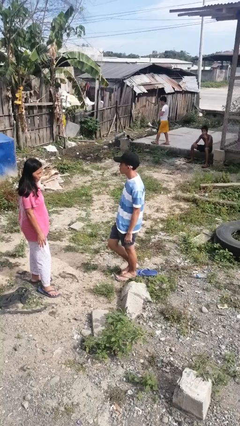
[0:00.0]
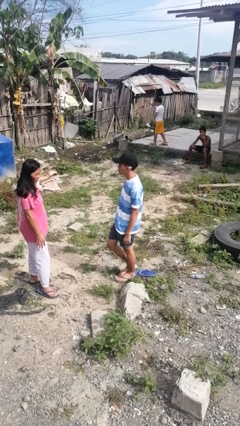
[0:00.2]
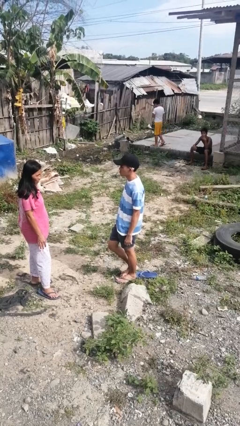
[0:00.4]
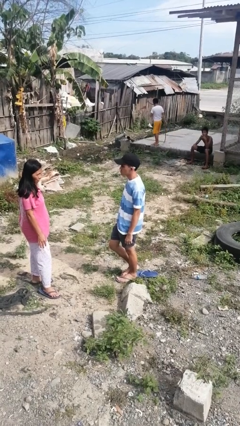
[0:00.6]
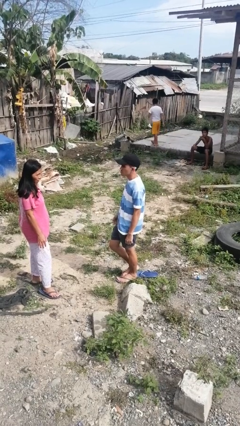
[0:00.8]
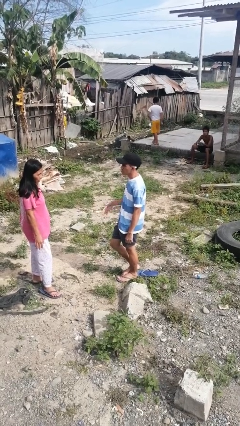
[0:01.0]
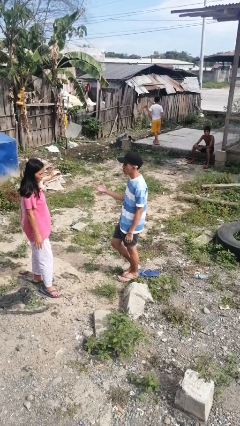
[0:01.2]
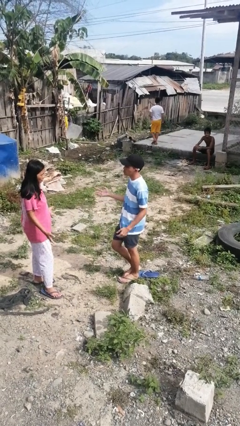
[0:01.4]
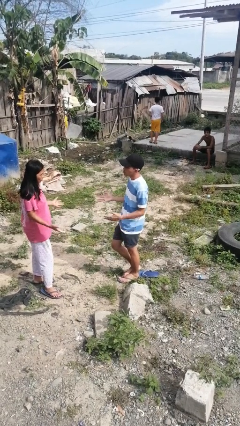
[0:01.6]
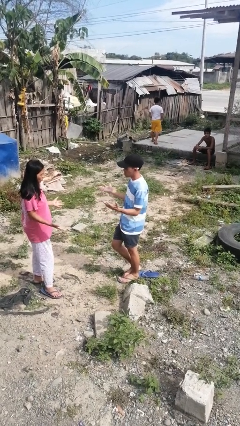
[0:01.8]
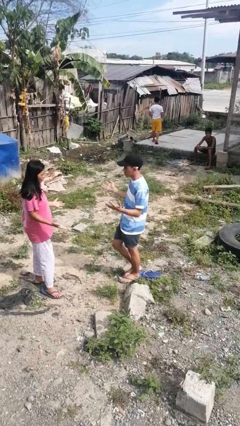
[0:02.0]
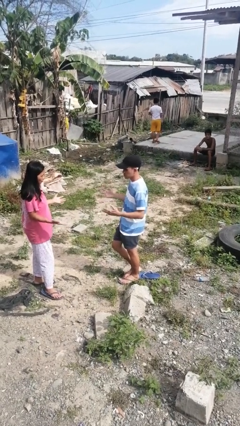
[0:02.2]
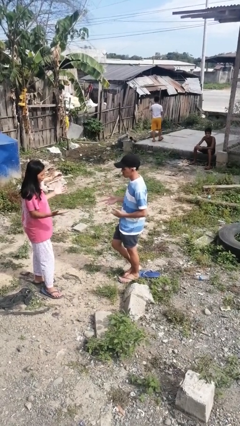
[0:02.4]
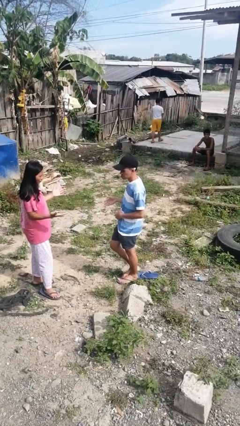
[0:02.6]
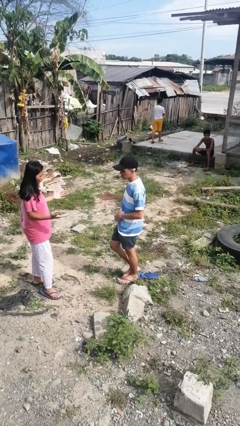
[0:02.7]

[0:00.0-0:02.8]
person talks to person

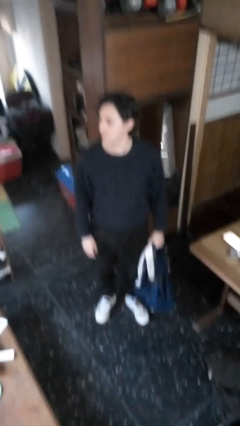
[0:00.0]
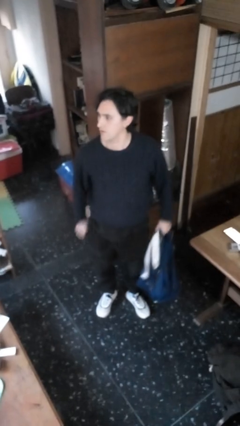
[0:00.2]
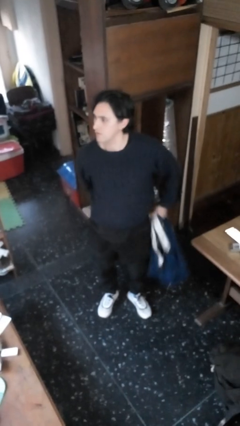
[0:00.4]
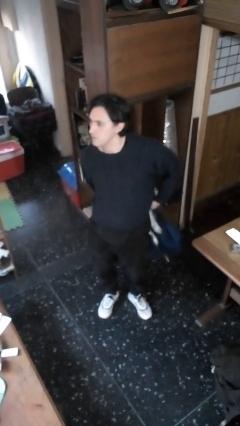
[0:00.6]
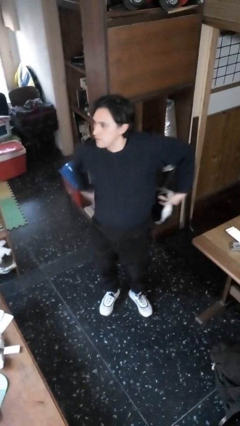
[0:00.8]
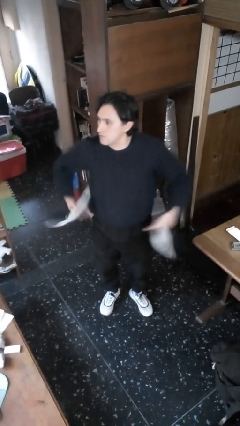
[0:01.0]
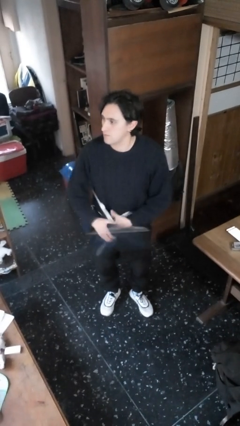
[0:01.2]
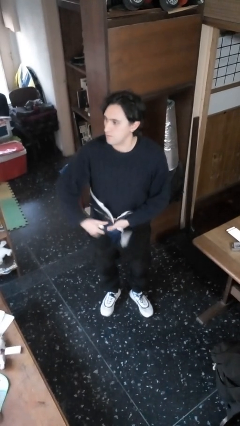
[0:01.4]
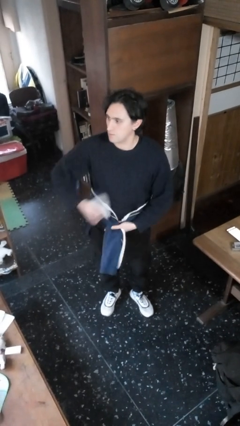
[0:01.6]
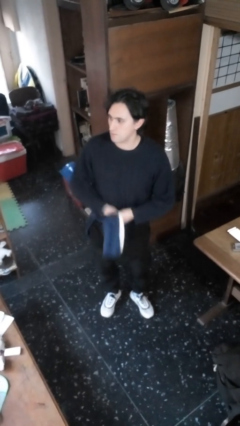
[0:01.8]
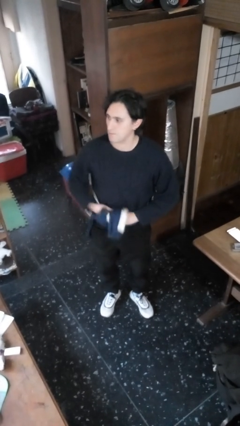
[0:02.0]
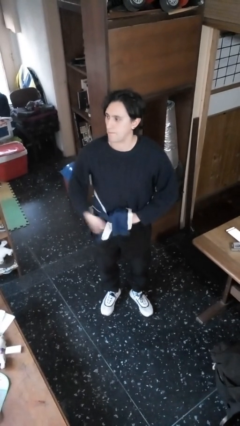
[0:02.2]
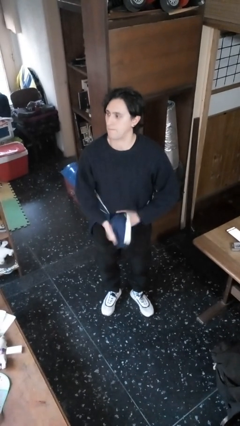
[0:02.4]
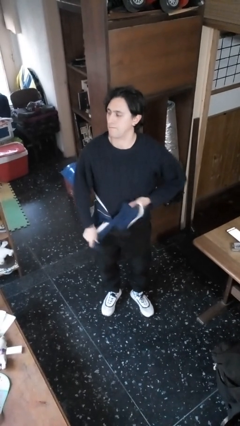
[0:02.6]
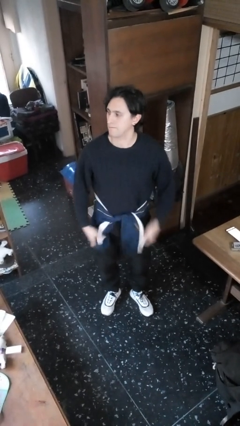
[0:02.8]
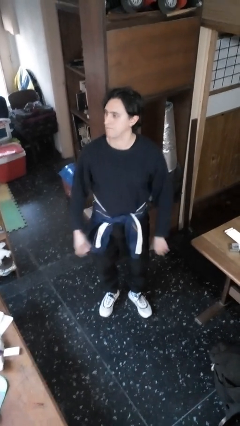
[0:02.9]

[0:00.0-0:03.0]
person ties jacket around waist

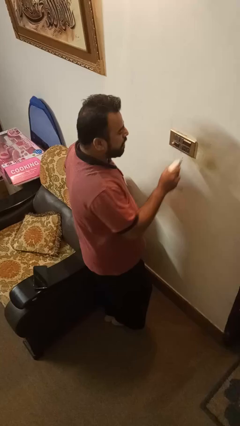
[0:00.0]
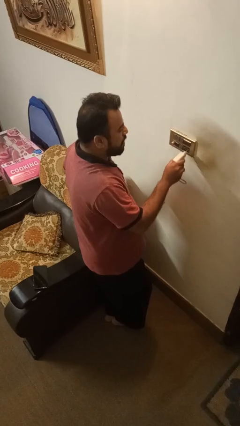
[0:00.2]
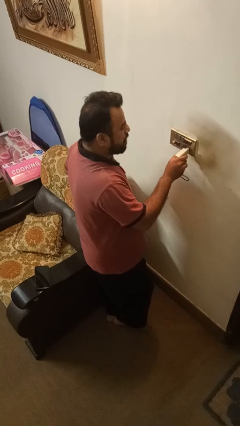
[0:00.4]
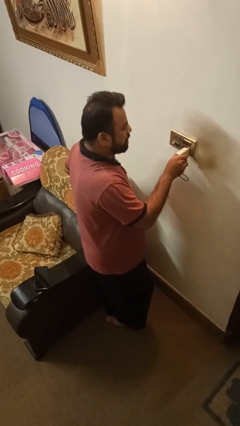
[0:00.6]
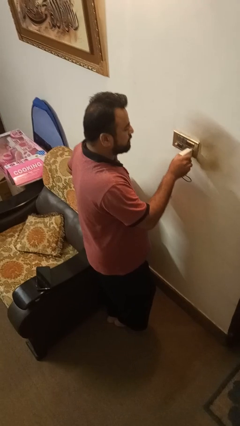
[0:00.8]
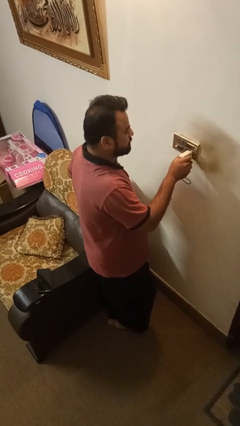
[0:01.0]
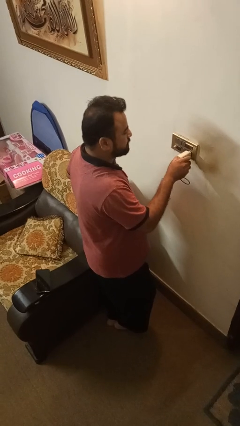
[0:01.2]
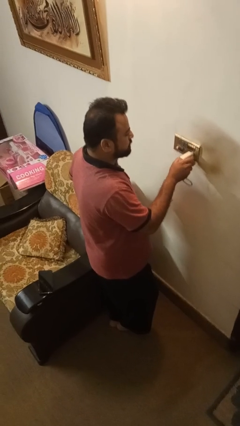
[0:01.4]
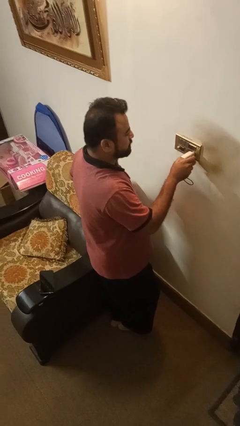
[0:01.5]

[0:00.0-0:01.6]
person plugs into electrical socket

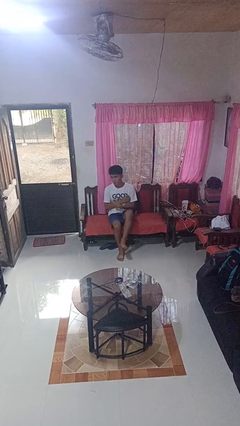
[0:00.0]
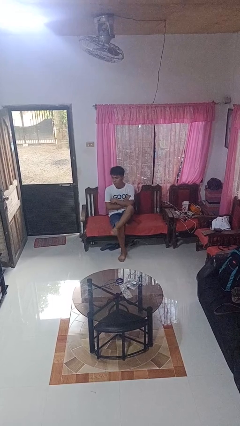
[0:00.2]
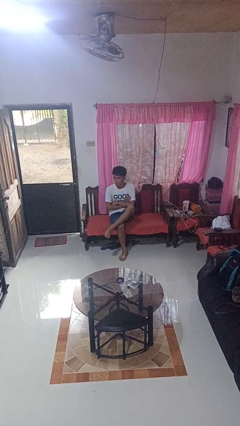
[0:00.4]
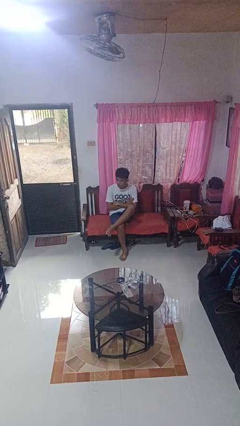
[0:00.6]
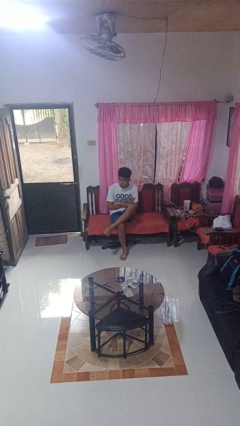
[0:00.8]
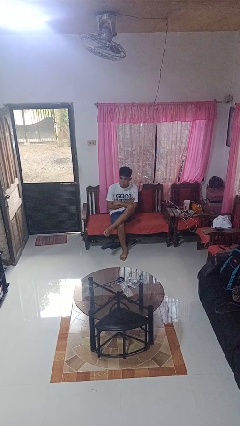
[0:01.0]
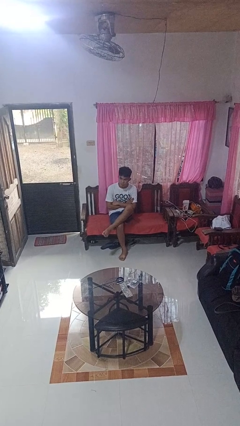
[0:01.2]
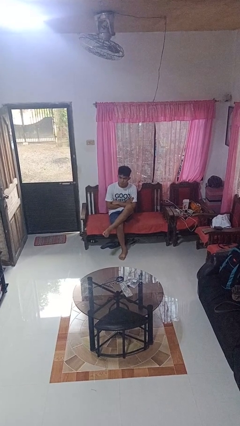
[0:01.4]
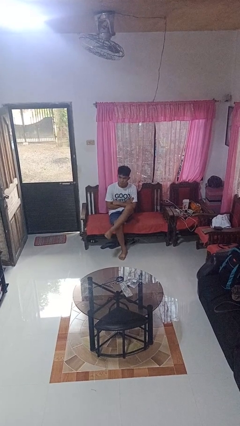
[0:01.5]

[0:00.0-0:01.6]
person crosses legs

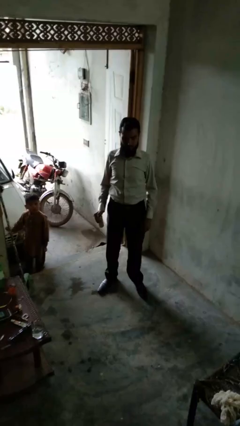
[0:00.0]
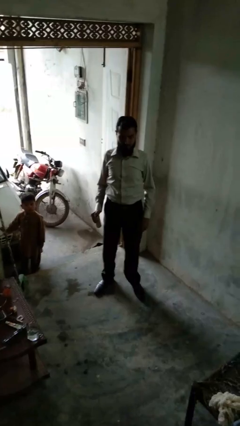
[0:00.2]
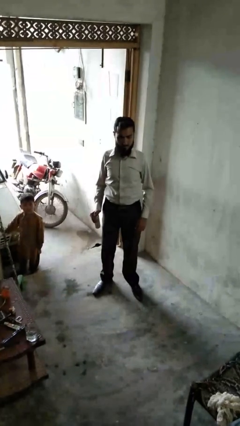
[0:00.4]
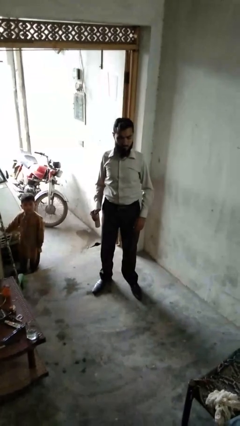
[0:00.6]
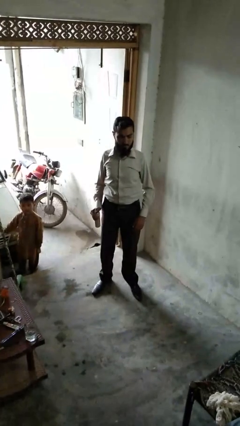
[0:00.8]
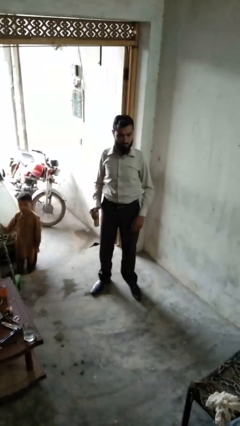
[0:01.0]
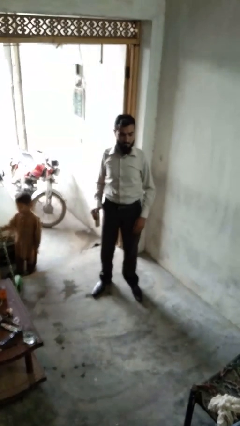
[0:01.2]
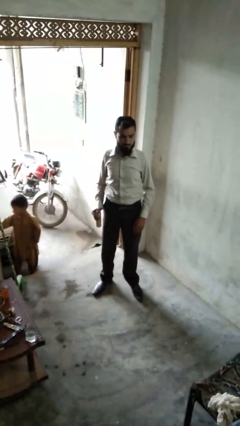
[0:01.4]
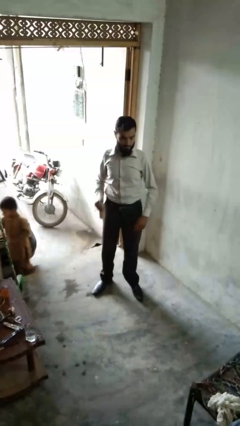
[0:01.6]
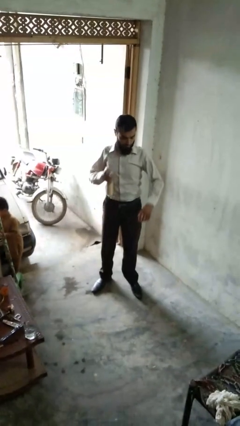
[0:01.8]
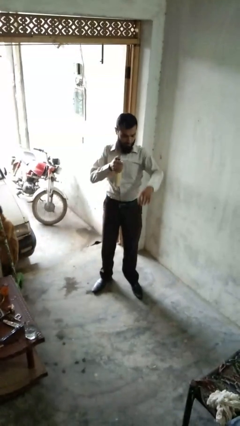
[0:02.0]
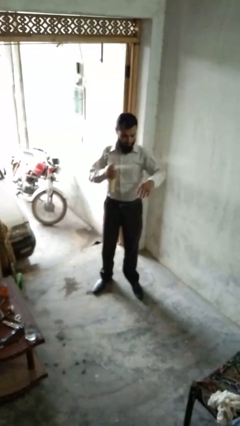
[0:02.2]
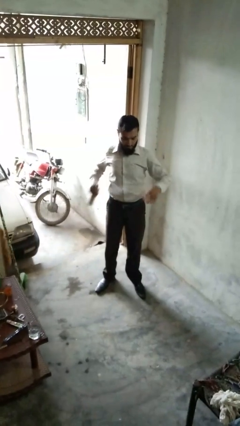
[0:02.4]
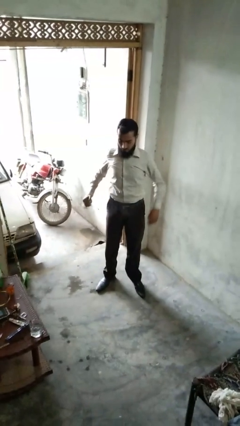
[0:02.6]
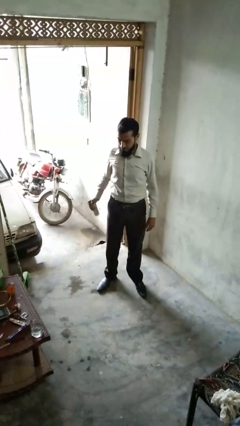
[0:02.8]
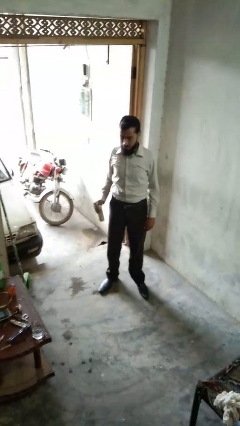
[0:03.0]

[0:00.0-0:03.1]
person applies deodorant

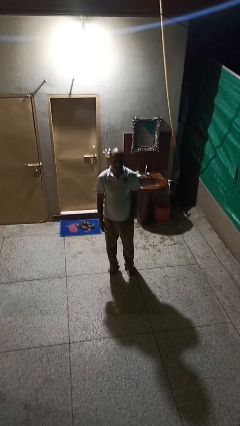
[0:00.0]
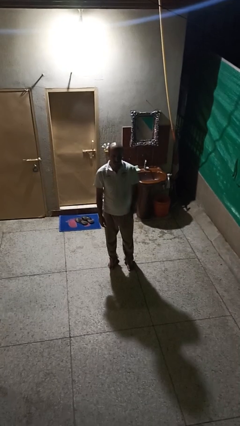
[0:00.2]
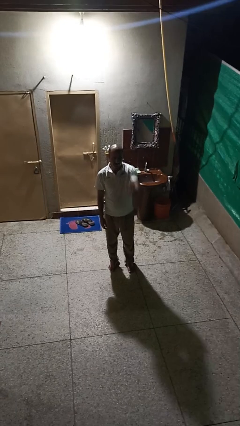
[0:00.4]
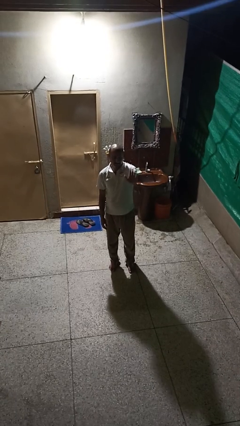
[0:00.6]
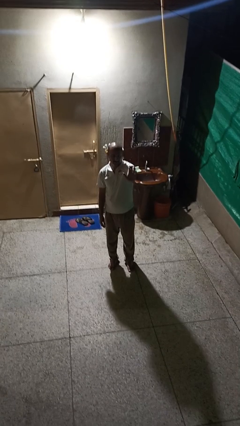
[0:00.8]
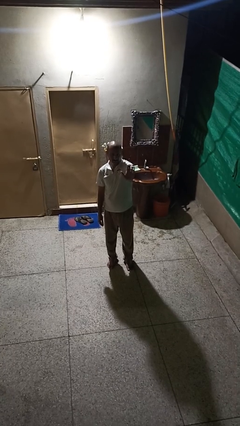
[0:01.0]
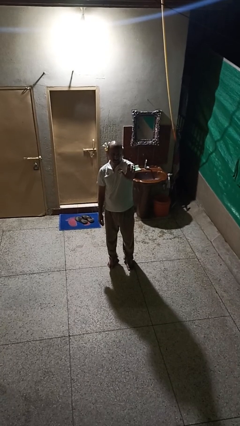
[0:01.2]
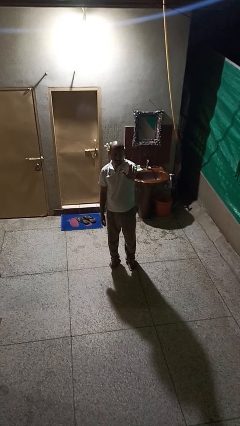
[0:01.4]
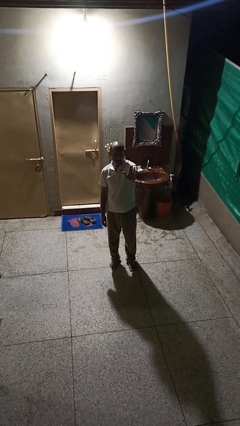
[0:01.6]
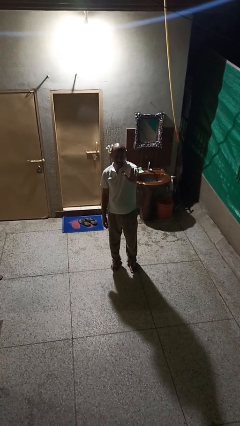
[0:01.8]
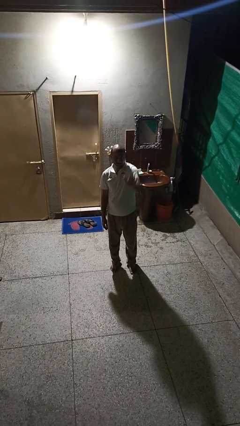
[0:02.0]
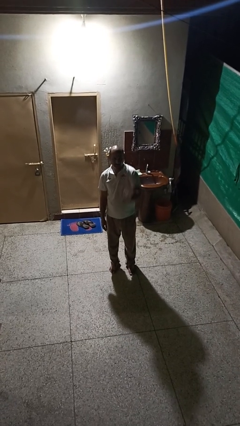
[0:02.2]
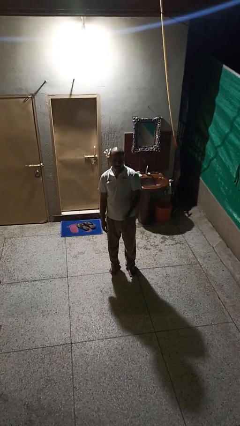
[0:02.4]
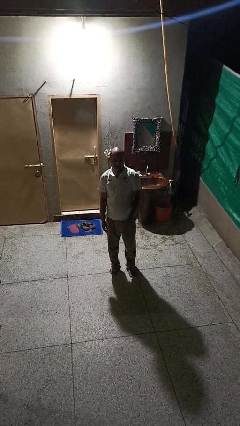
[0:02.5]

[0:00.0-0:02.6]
person gestures stop

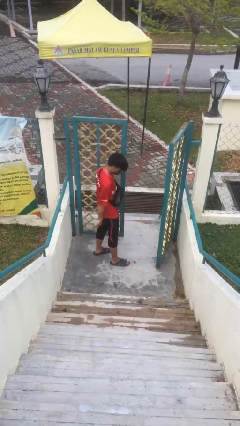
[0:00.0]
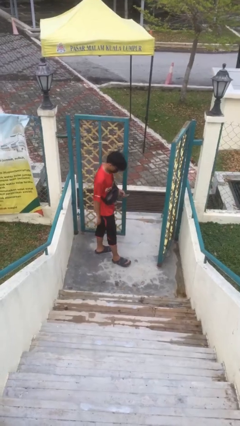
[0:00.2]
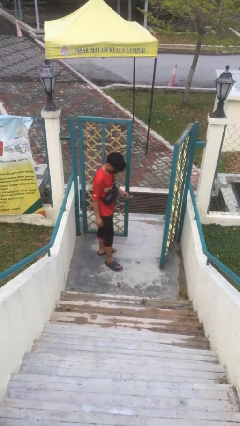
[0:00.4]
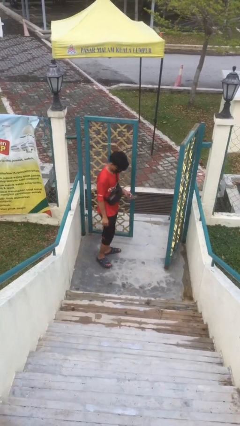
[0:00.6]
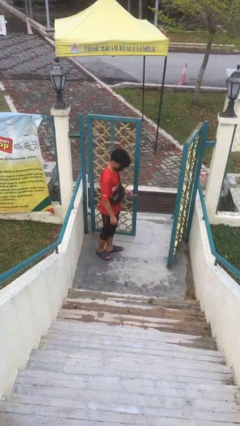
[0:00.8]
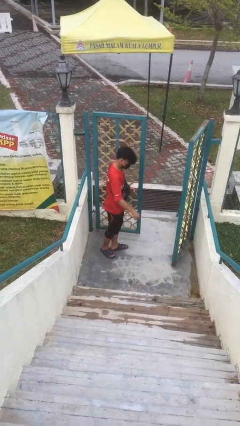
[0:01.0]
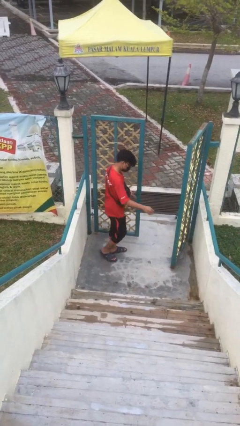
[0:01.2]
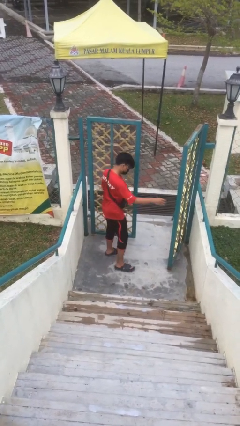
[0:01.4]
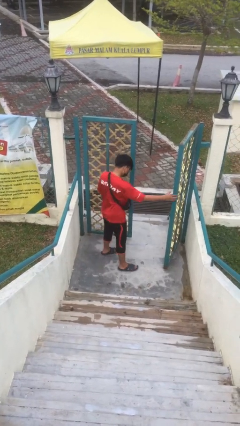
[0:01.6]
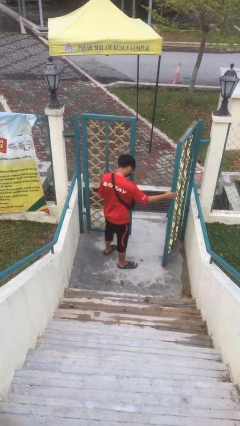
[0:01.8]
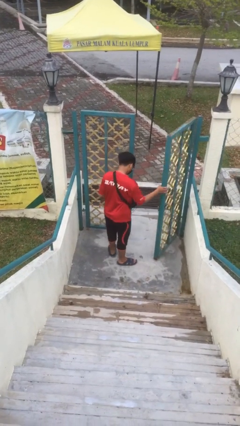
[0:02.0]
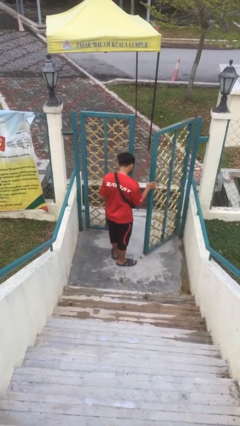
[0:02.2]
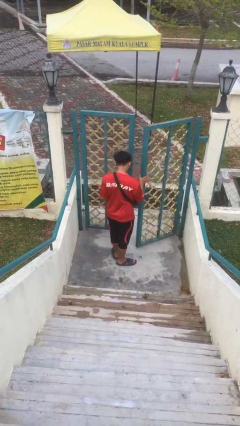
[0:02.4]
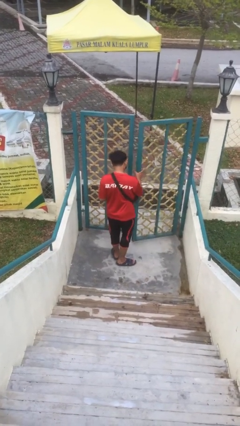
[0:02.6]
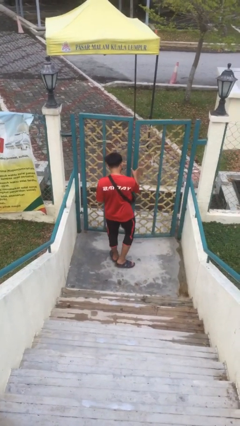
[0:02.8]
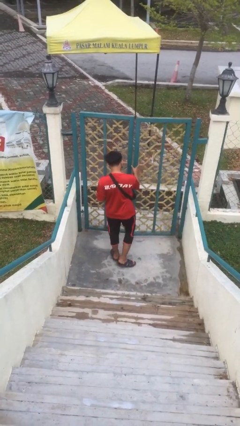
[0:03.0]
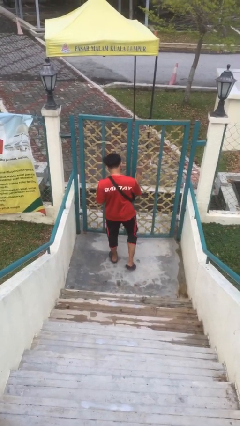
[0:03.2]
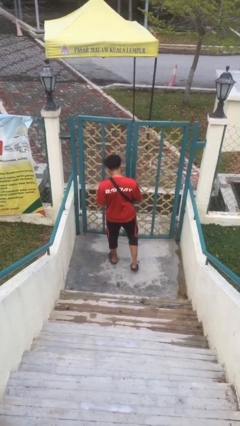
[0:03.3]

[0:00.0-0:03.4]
person closes facility door
